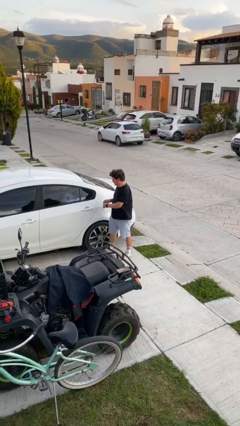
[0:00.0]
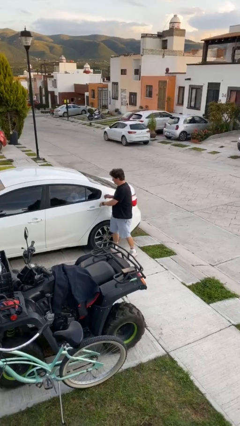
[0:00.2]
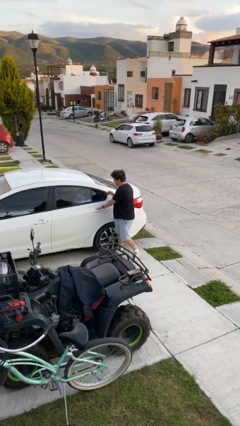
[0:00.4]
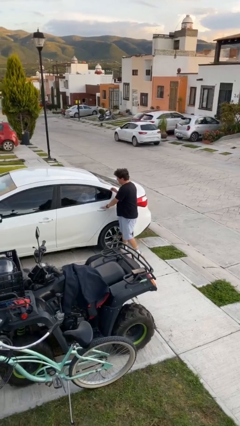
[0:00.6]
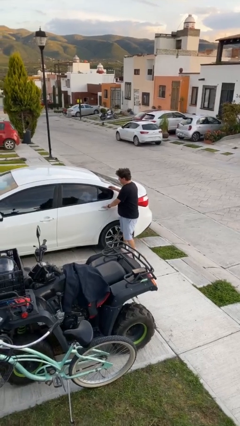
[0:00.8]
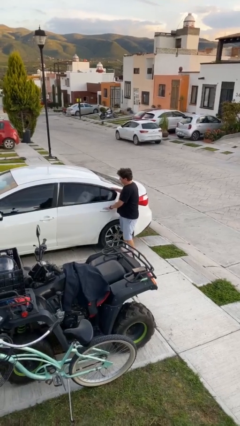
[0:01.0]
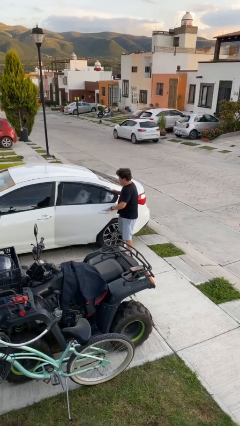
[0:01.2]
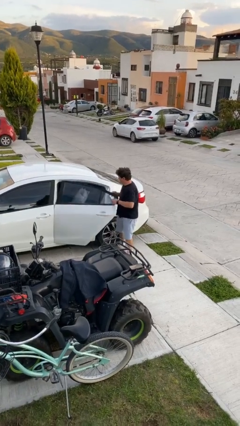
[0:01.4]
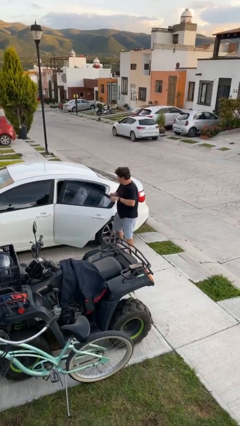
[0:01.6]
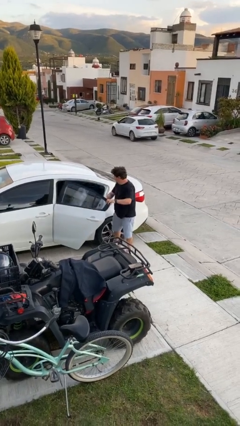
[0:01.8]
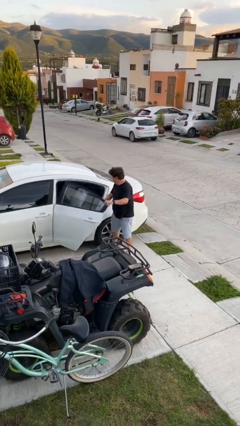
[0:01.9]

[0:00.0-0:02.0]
person opens car door

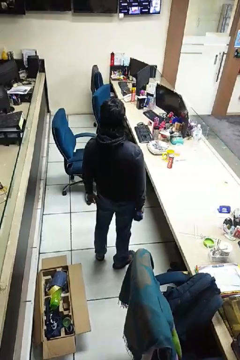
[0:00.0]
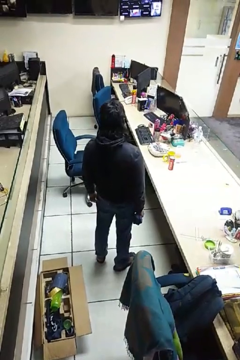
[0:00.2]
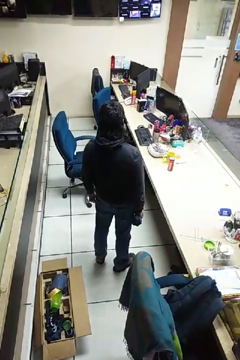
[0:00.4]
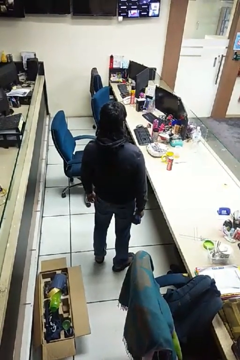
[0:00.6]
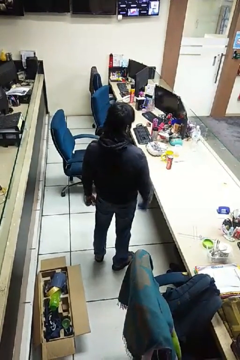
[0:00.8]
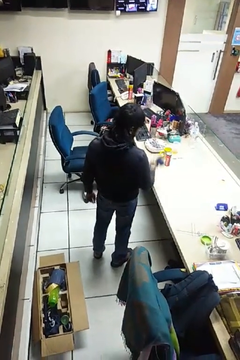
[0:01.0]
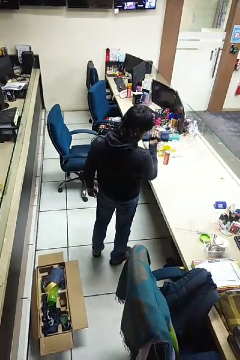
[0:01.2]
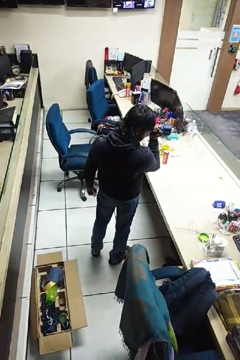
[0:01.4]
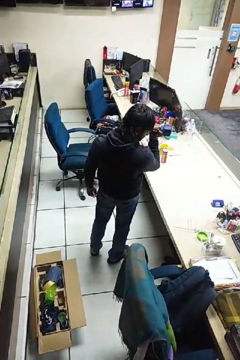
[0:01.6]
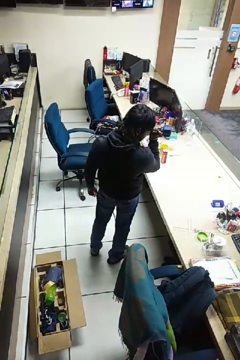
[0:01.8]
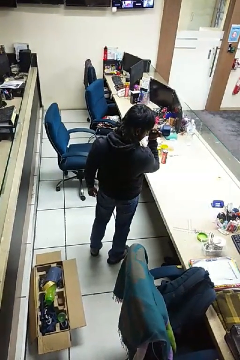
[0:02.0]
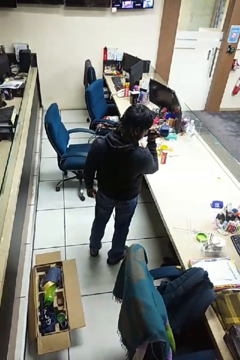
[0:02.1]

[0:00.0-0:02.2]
person lifts dumbbells

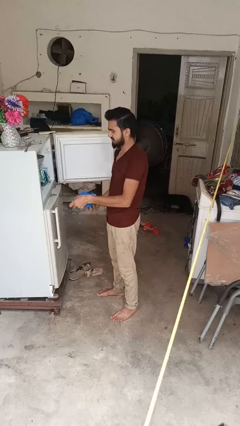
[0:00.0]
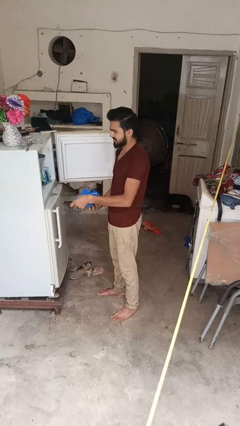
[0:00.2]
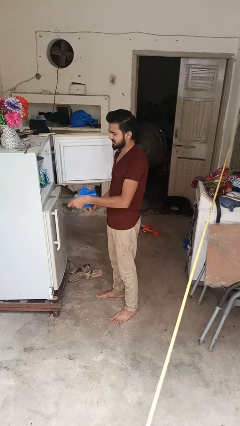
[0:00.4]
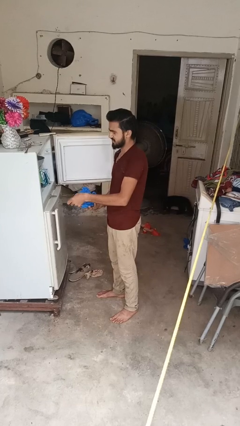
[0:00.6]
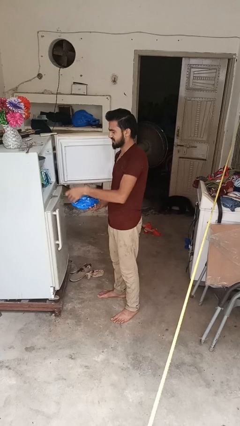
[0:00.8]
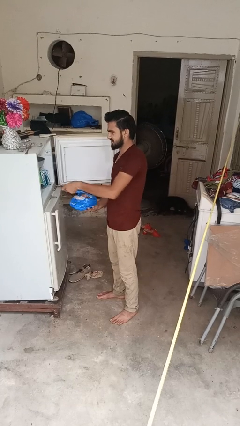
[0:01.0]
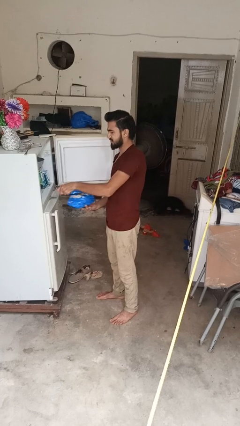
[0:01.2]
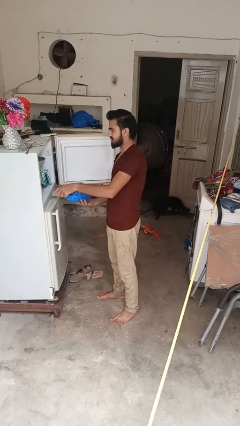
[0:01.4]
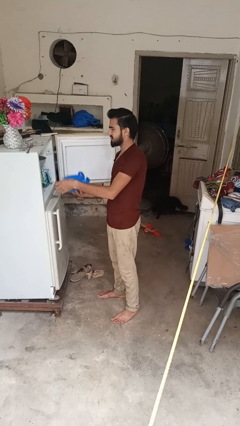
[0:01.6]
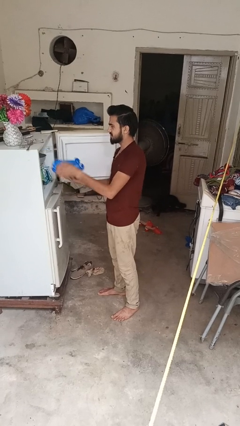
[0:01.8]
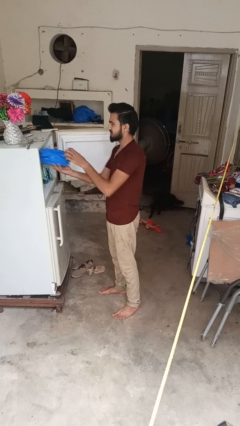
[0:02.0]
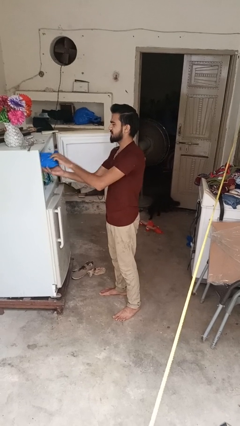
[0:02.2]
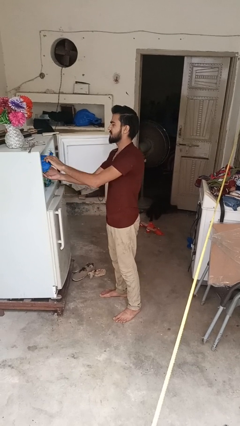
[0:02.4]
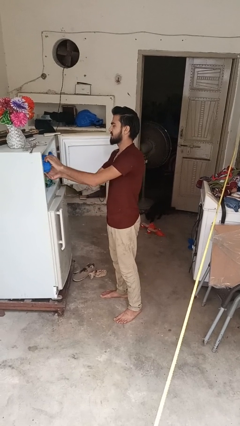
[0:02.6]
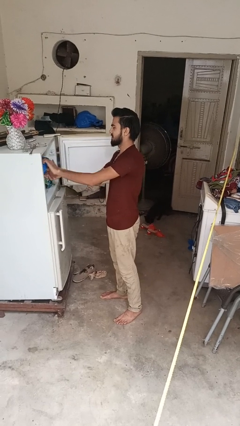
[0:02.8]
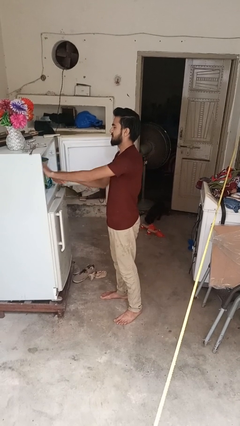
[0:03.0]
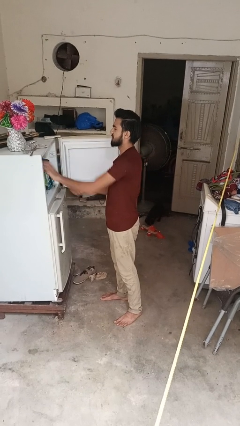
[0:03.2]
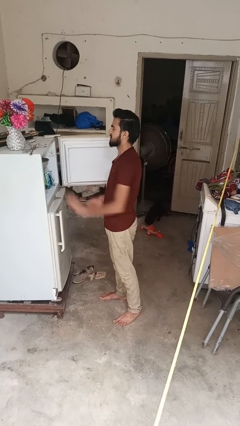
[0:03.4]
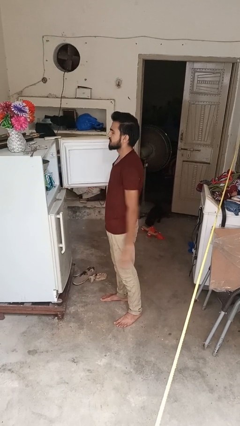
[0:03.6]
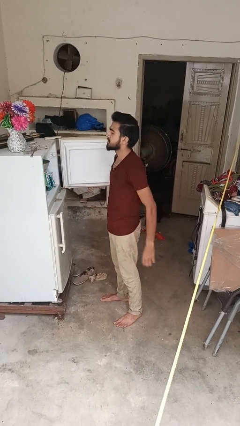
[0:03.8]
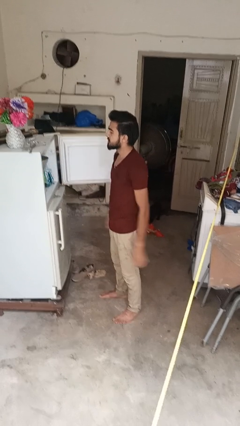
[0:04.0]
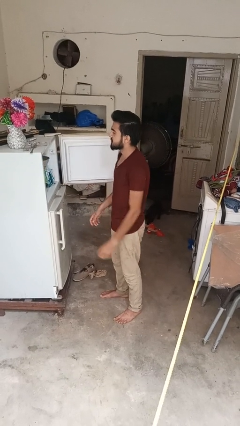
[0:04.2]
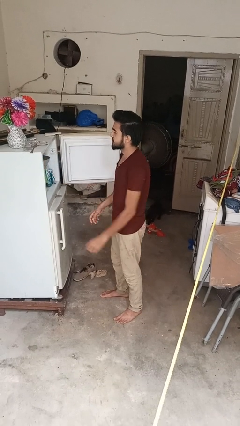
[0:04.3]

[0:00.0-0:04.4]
person loads groceries into refrigerator

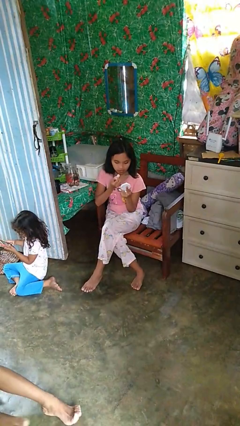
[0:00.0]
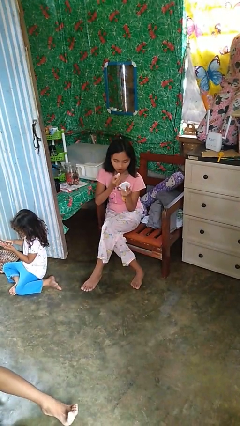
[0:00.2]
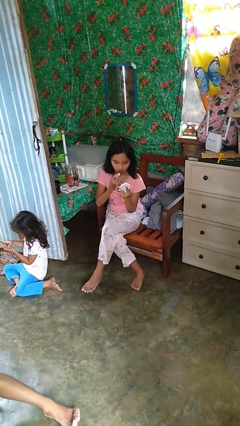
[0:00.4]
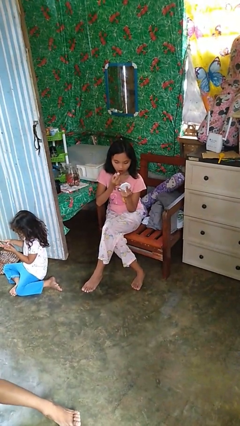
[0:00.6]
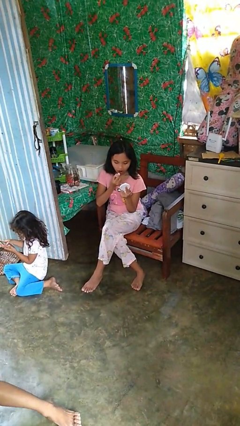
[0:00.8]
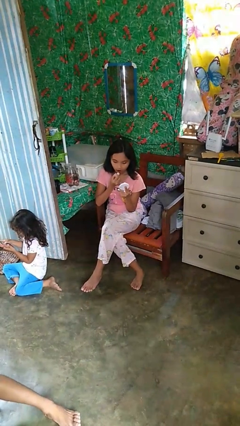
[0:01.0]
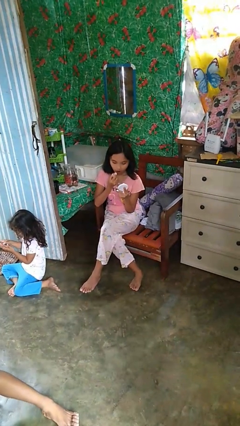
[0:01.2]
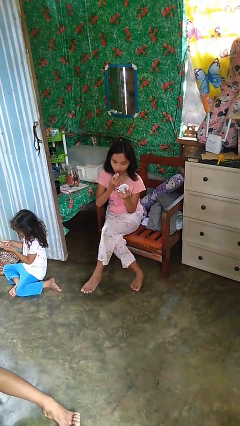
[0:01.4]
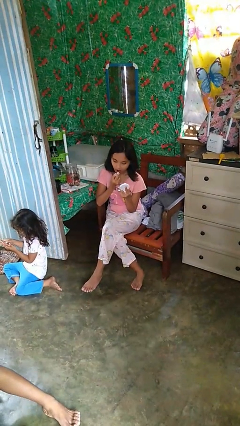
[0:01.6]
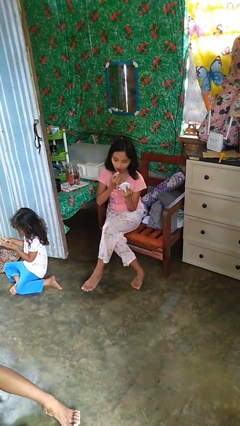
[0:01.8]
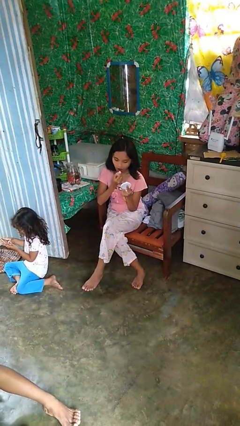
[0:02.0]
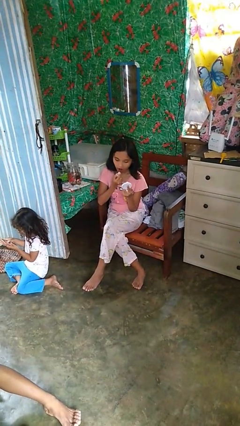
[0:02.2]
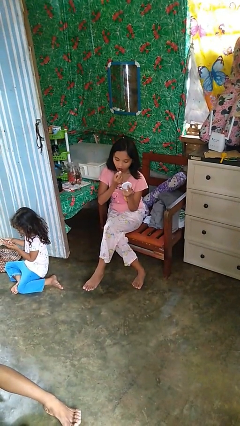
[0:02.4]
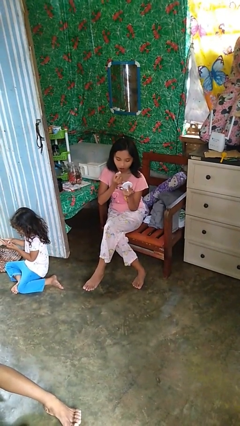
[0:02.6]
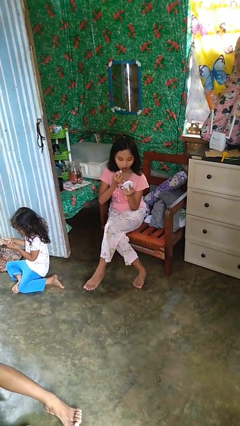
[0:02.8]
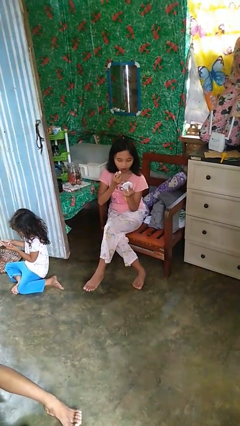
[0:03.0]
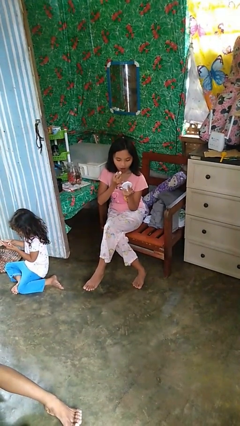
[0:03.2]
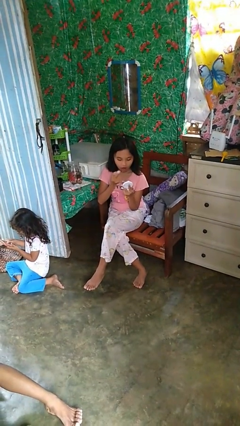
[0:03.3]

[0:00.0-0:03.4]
person applies lip makeup

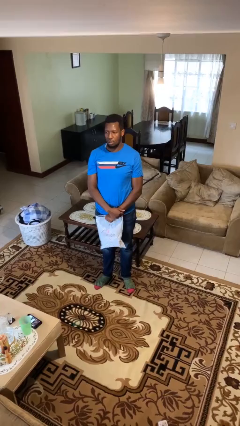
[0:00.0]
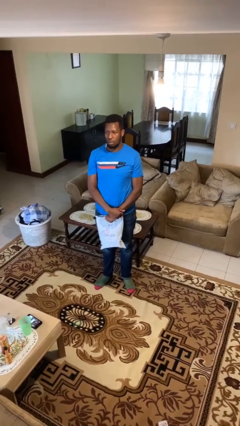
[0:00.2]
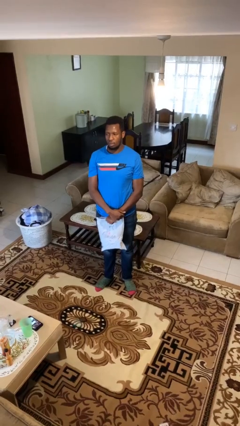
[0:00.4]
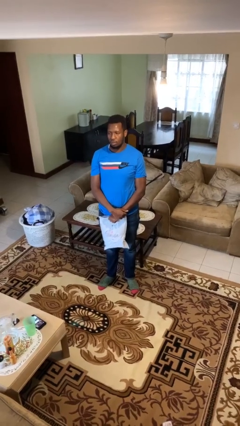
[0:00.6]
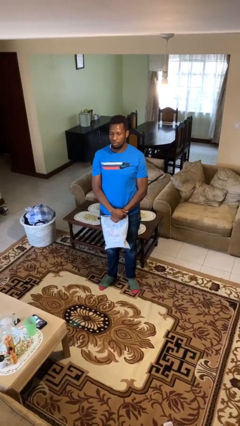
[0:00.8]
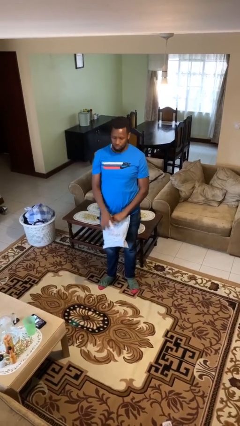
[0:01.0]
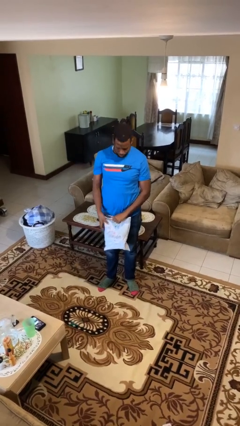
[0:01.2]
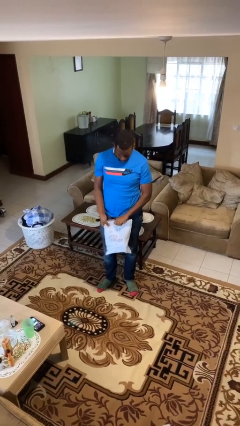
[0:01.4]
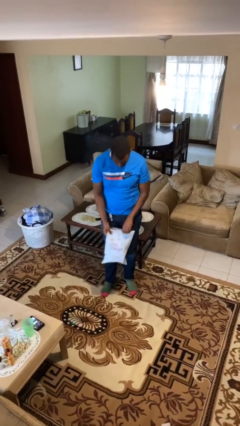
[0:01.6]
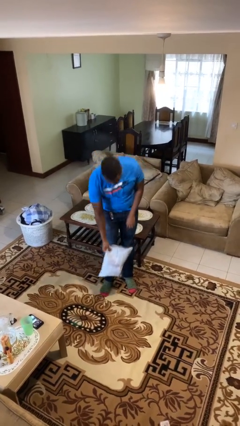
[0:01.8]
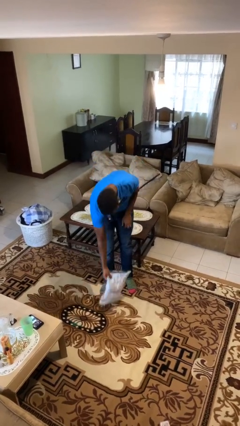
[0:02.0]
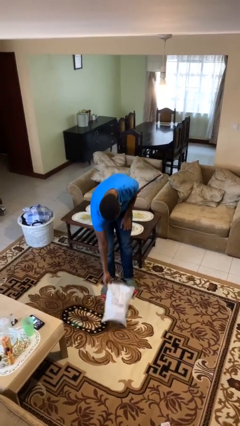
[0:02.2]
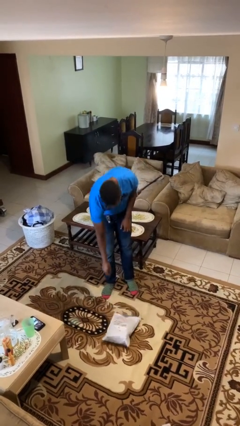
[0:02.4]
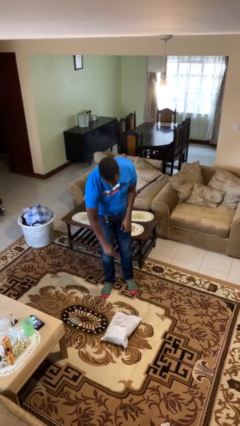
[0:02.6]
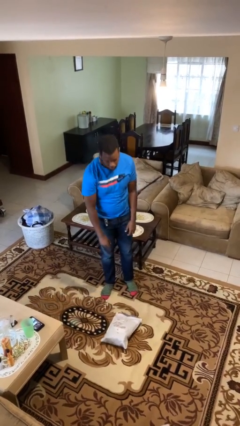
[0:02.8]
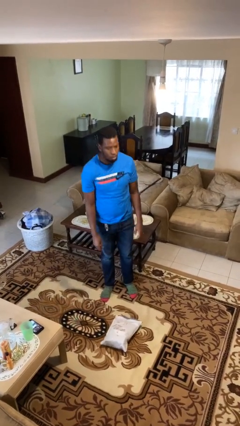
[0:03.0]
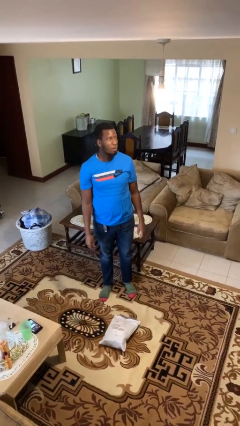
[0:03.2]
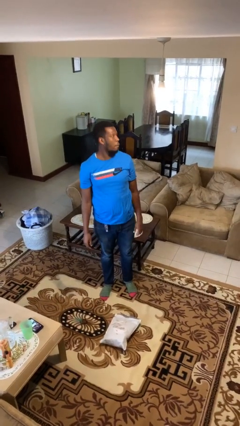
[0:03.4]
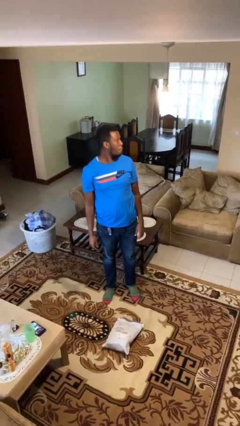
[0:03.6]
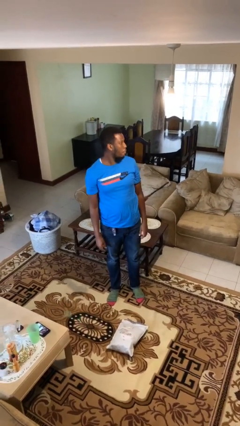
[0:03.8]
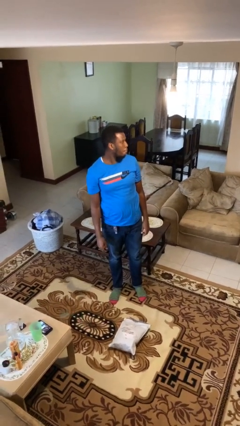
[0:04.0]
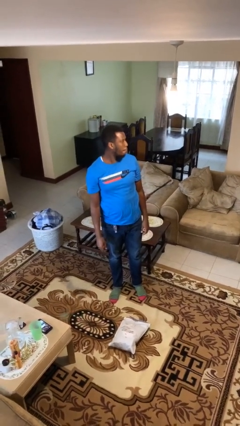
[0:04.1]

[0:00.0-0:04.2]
person puts down object on floor

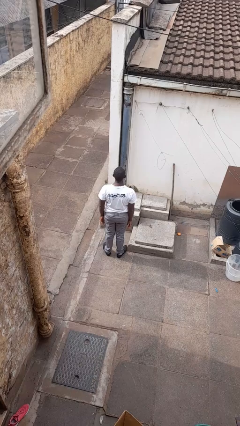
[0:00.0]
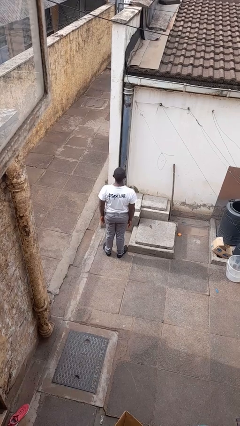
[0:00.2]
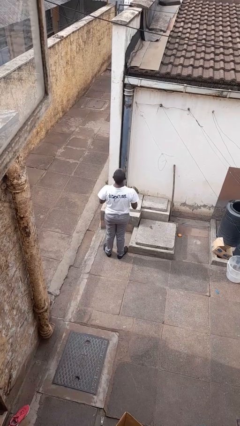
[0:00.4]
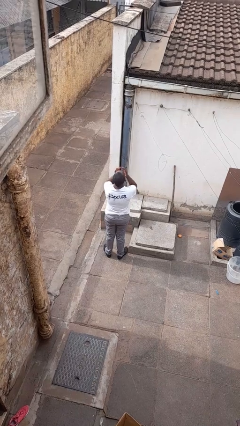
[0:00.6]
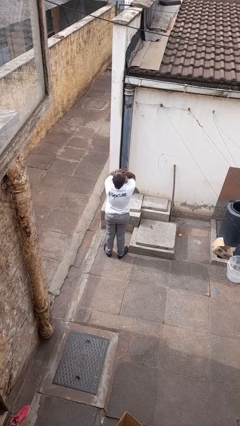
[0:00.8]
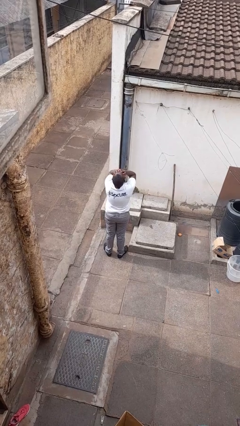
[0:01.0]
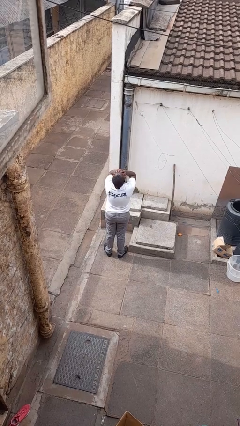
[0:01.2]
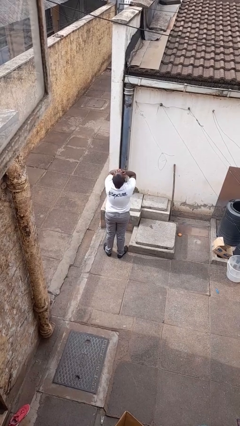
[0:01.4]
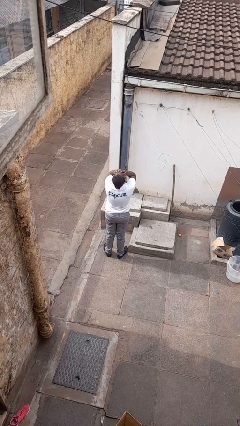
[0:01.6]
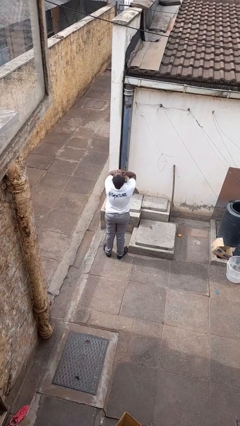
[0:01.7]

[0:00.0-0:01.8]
person covers face with hands

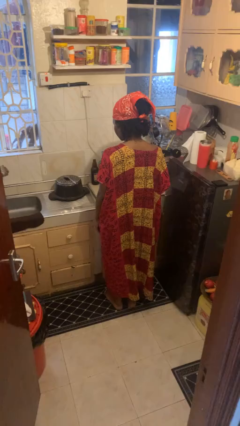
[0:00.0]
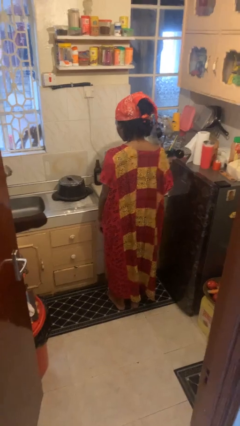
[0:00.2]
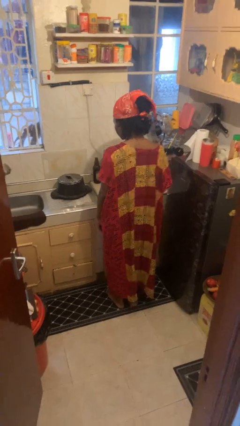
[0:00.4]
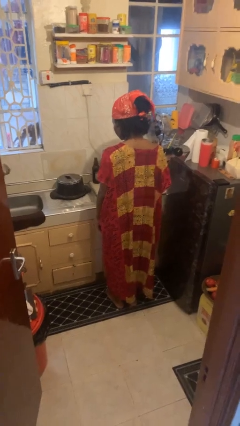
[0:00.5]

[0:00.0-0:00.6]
person closes kitchen drawer
